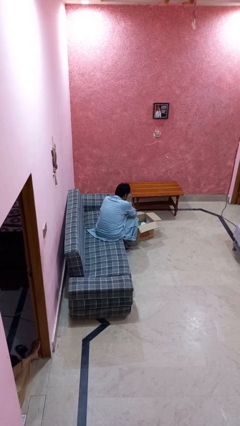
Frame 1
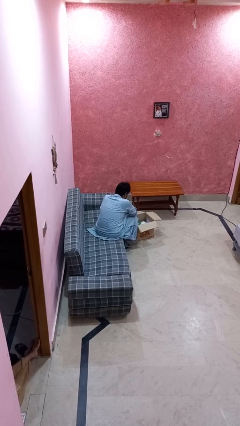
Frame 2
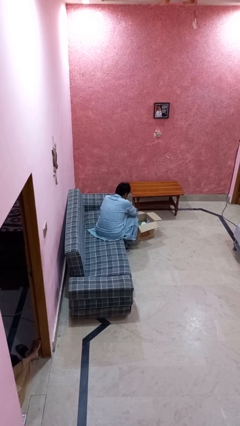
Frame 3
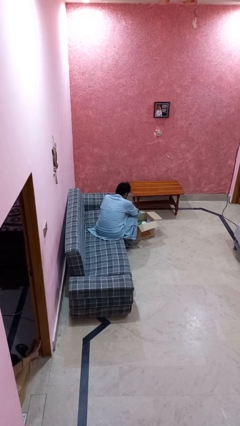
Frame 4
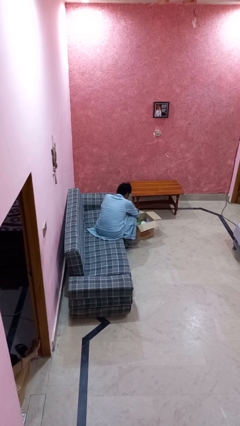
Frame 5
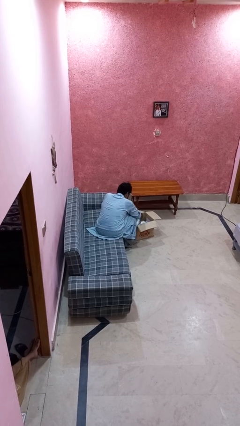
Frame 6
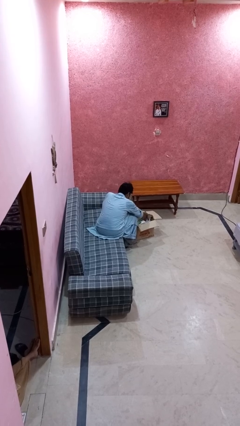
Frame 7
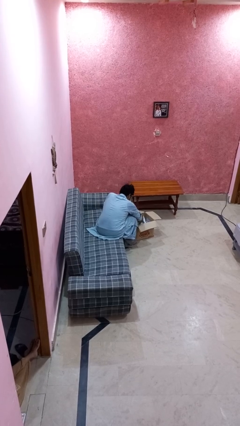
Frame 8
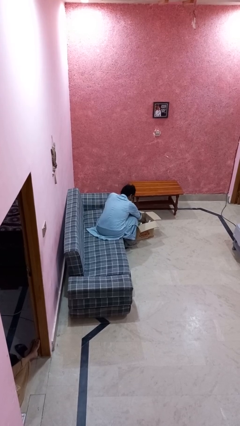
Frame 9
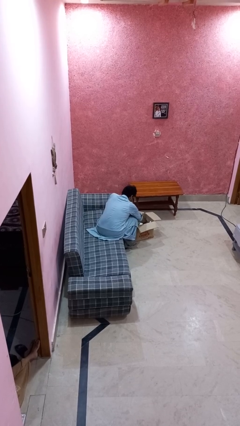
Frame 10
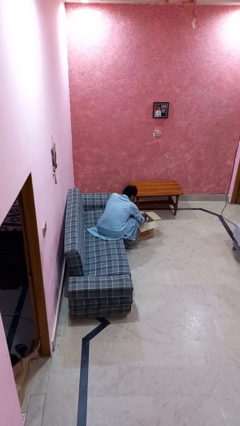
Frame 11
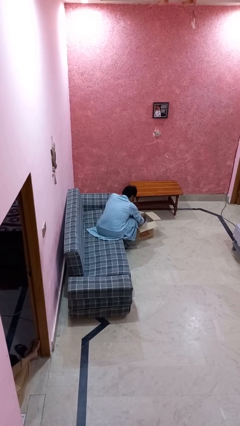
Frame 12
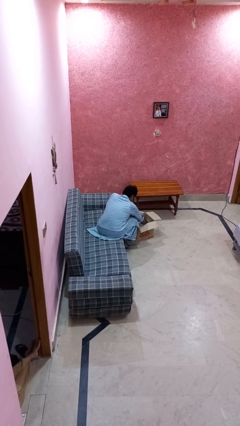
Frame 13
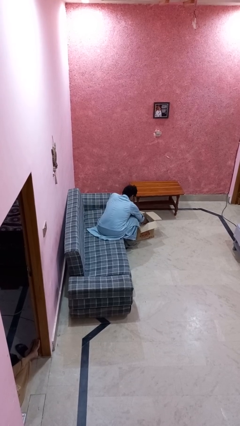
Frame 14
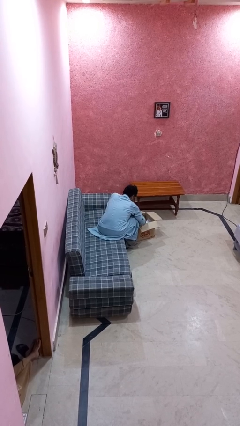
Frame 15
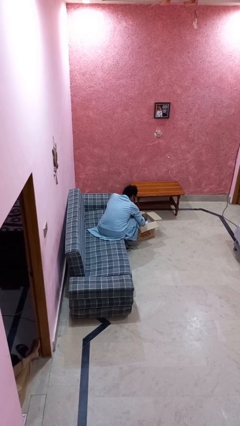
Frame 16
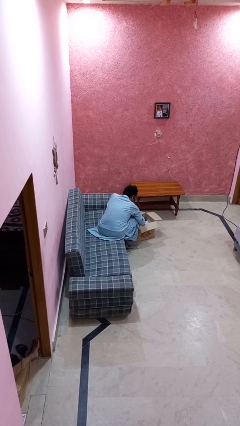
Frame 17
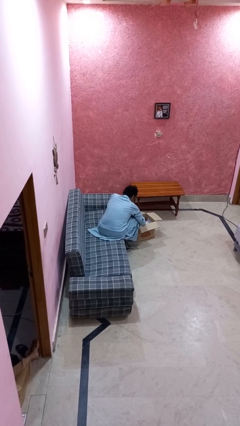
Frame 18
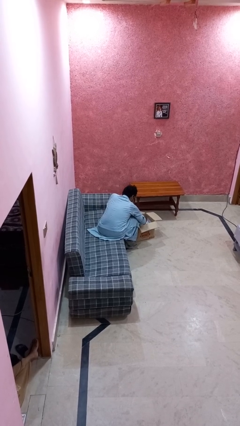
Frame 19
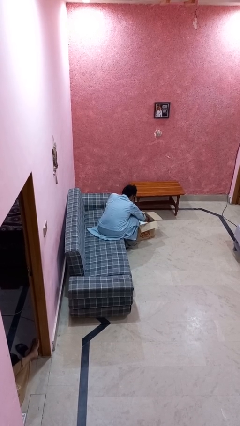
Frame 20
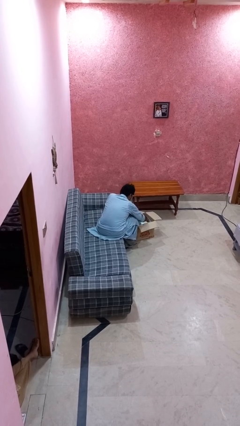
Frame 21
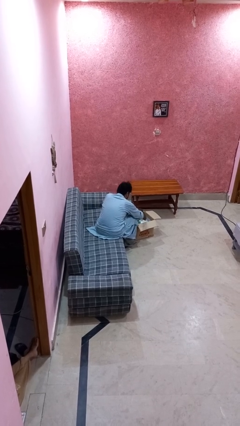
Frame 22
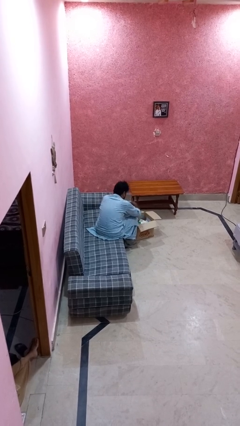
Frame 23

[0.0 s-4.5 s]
person searches in box

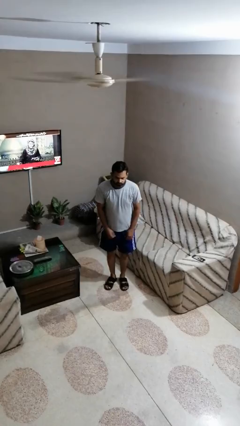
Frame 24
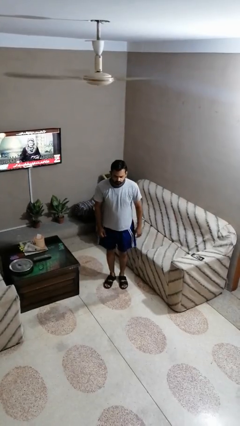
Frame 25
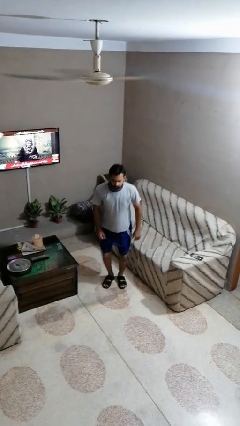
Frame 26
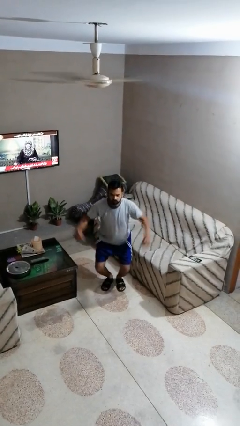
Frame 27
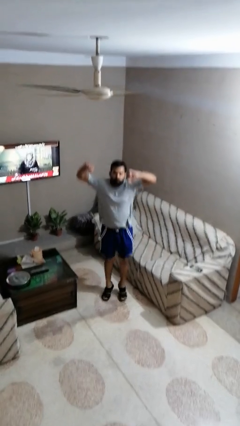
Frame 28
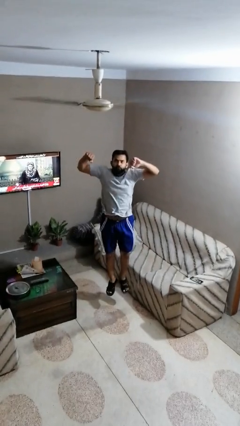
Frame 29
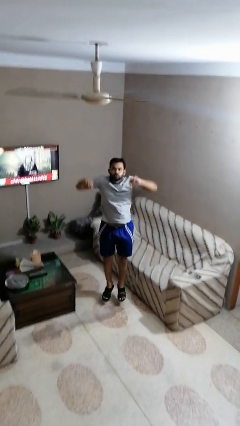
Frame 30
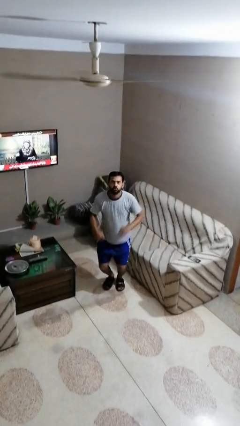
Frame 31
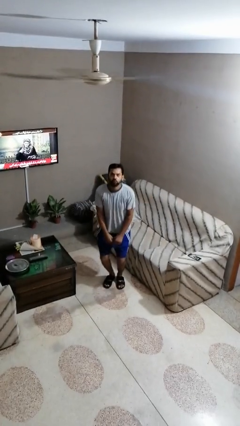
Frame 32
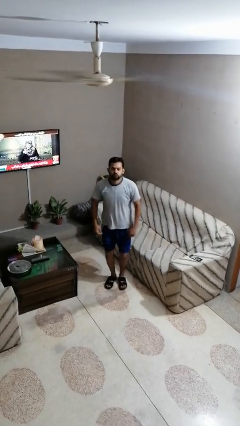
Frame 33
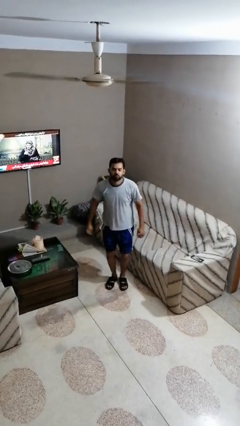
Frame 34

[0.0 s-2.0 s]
person jumps

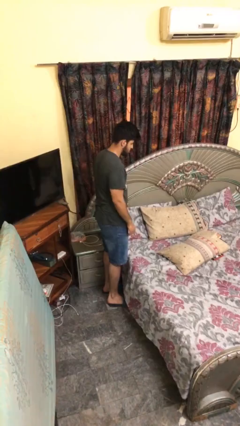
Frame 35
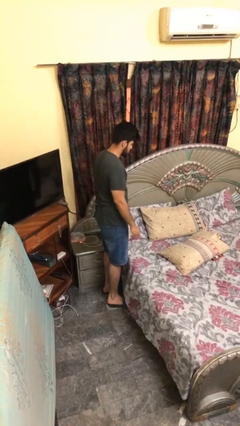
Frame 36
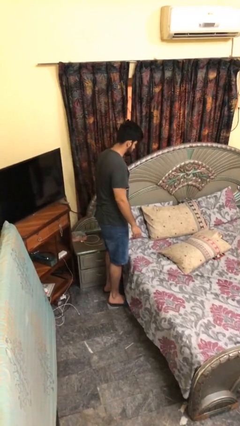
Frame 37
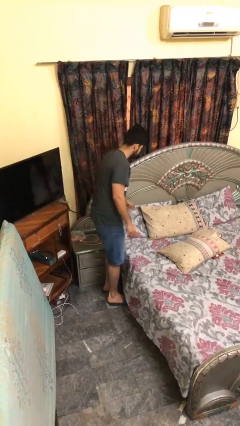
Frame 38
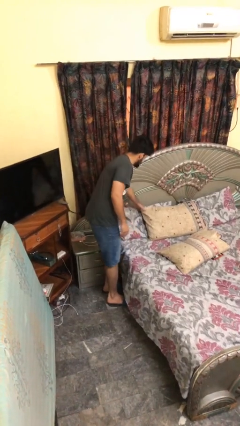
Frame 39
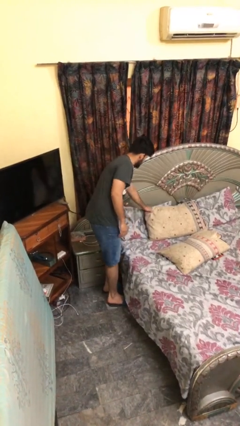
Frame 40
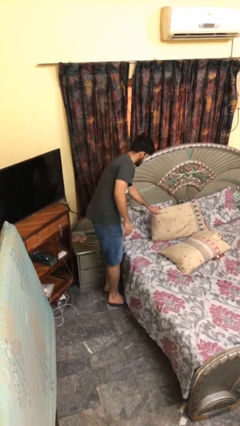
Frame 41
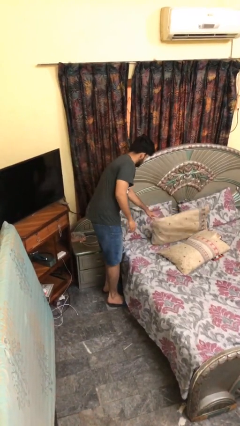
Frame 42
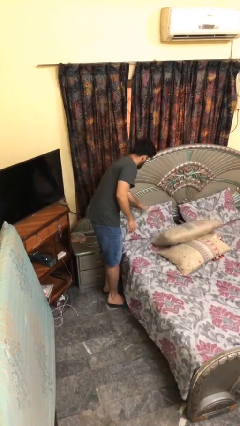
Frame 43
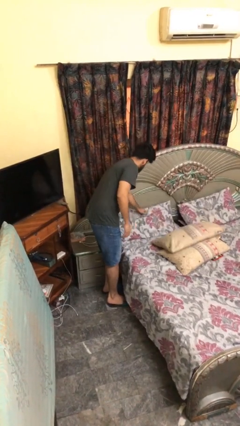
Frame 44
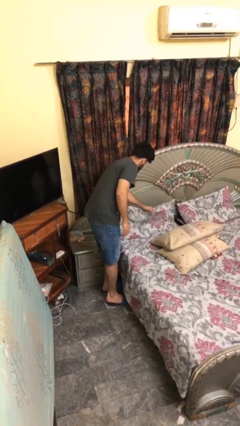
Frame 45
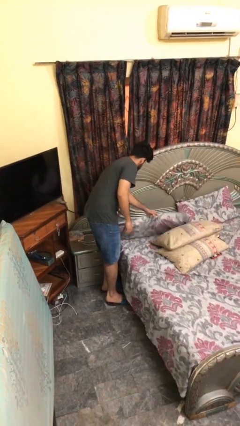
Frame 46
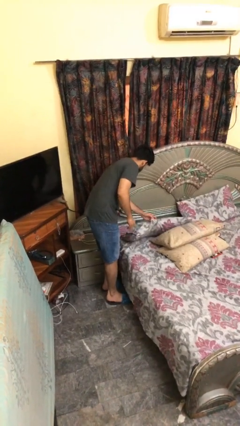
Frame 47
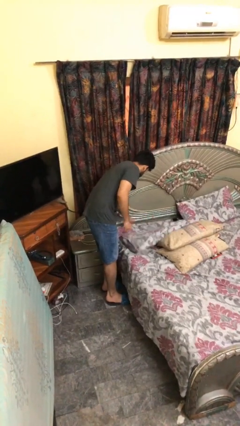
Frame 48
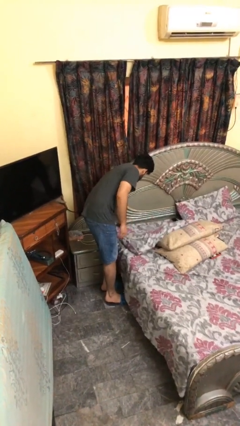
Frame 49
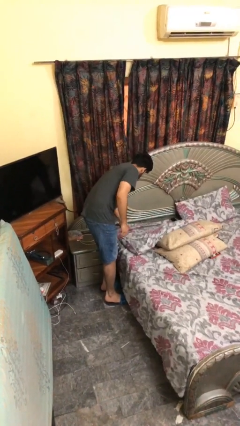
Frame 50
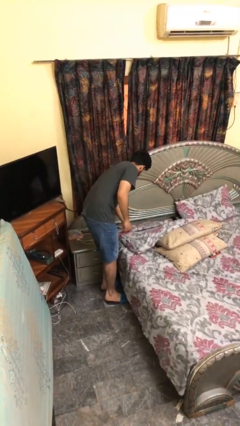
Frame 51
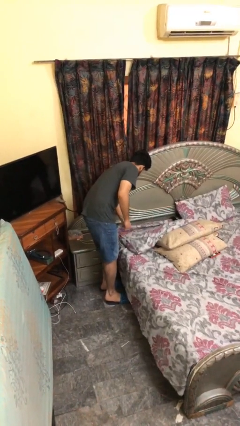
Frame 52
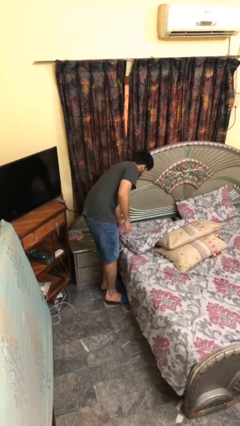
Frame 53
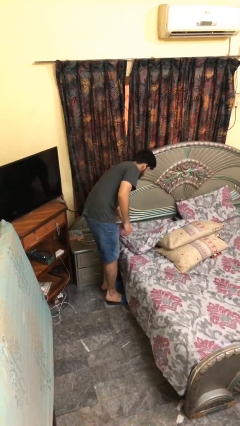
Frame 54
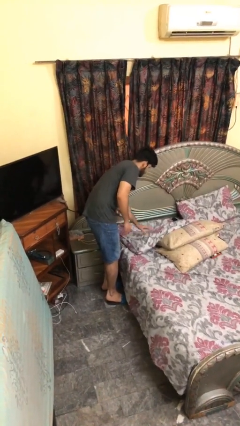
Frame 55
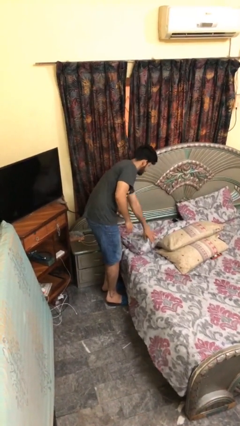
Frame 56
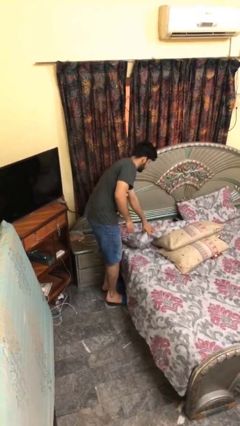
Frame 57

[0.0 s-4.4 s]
person searches under bed

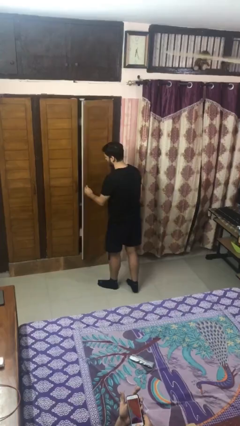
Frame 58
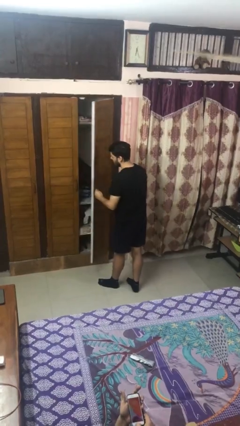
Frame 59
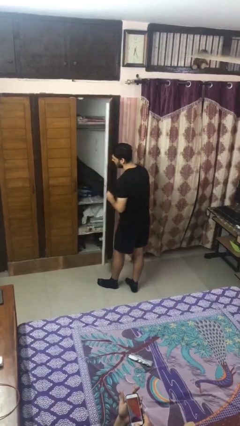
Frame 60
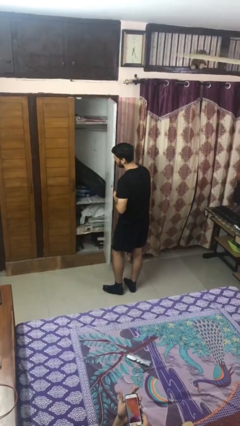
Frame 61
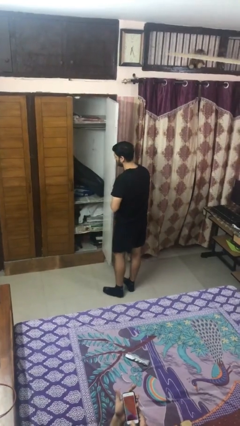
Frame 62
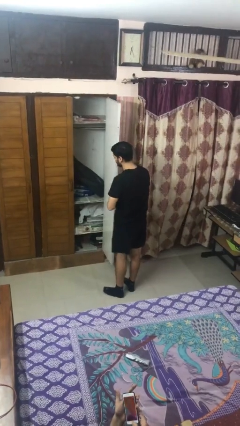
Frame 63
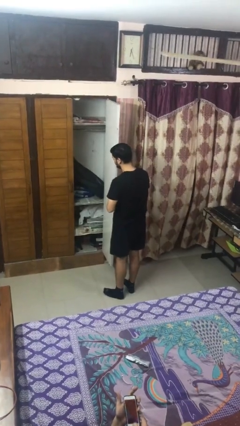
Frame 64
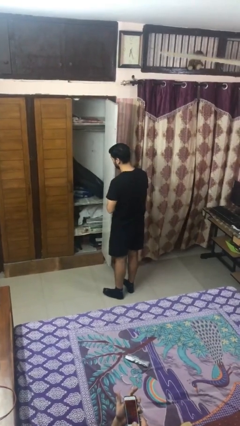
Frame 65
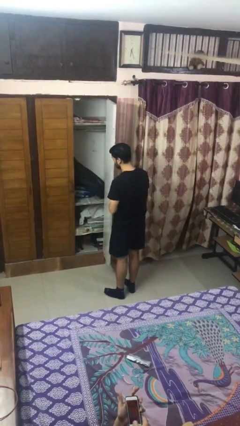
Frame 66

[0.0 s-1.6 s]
person opens facility door

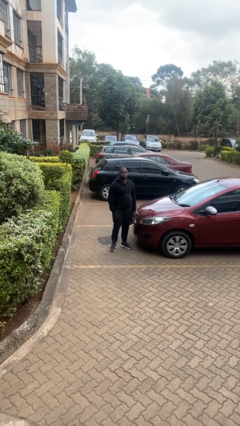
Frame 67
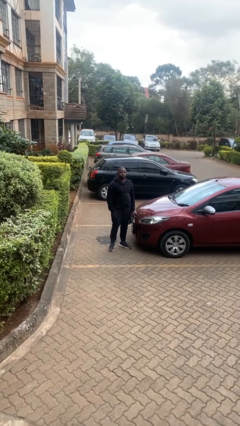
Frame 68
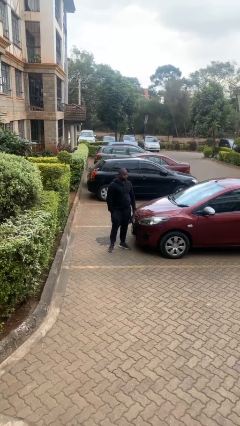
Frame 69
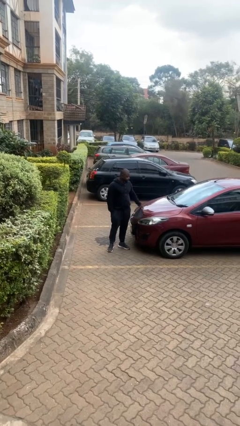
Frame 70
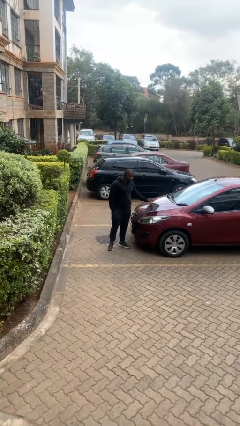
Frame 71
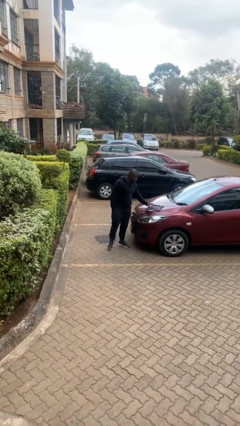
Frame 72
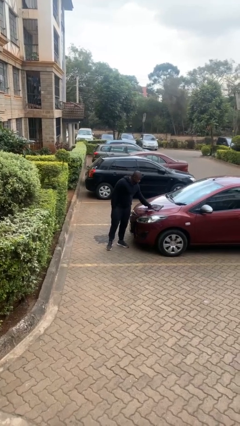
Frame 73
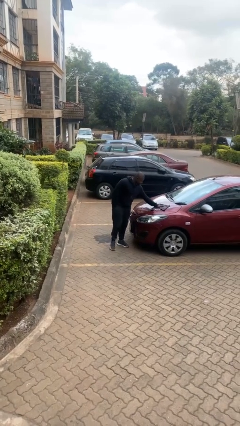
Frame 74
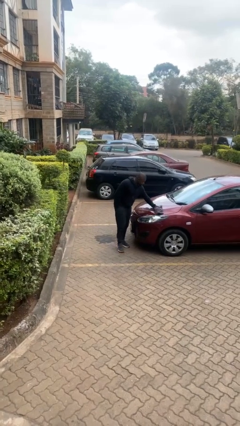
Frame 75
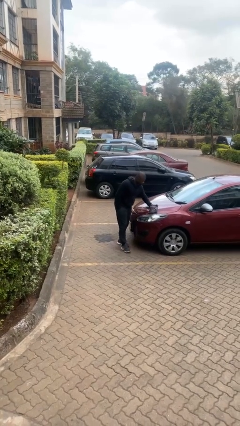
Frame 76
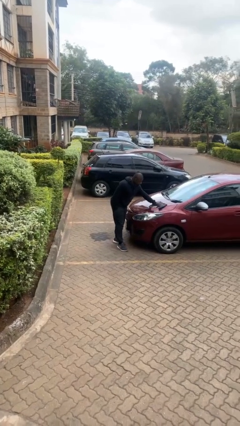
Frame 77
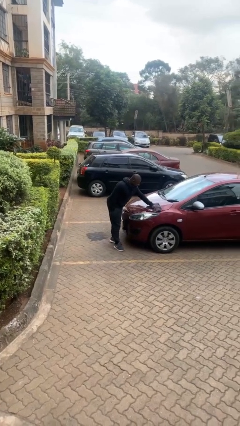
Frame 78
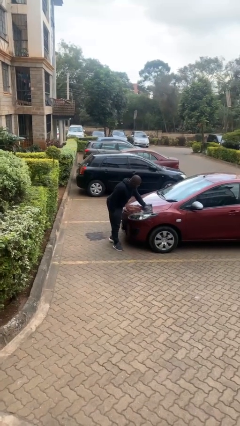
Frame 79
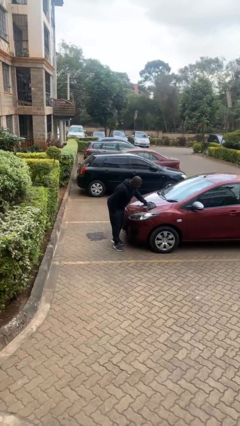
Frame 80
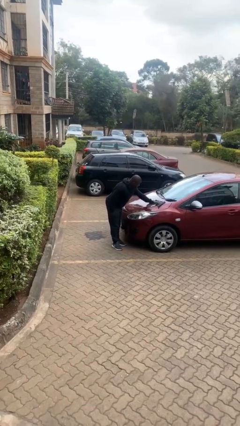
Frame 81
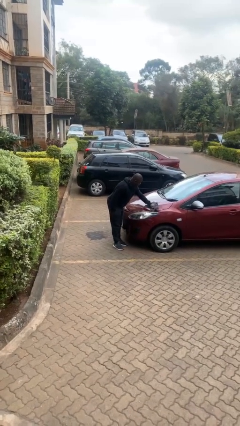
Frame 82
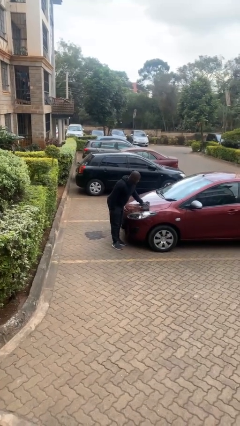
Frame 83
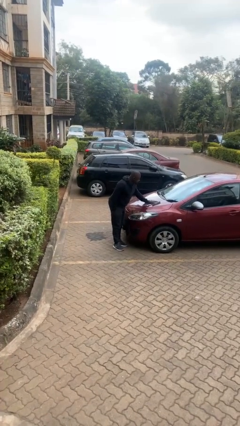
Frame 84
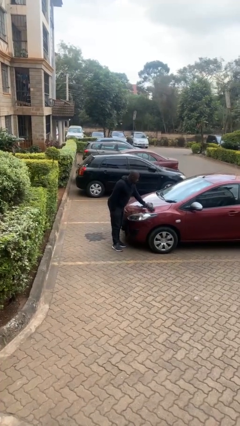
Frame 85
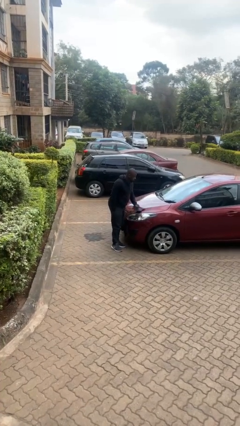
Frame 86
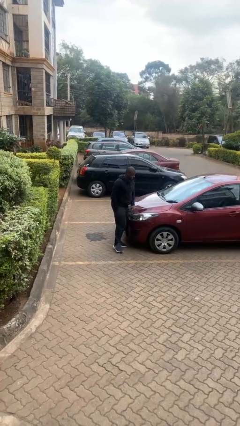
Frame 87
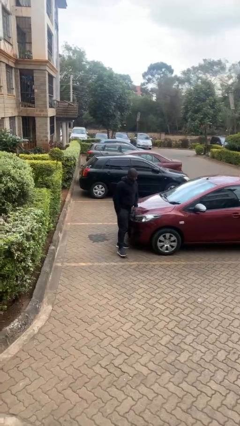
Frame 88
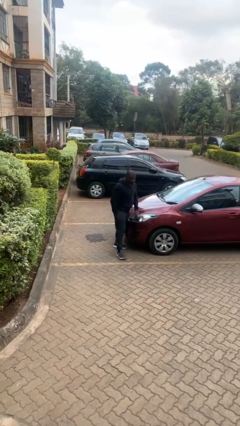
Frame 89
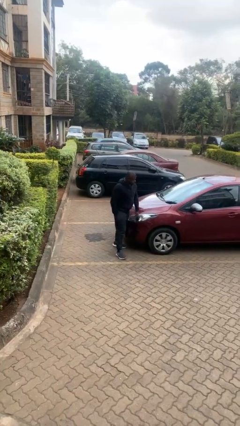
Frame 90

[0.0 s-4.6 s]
person polishes car with rag
